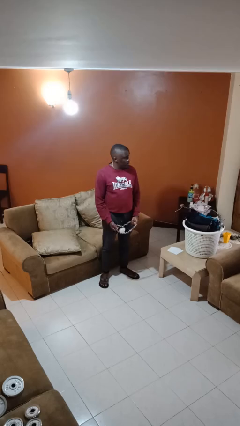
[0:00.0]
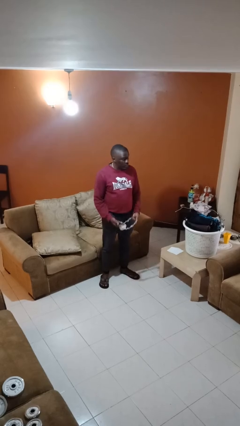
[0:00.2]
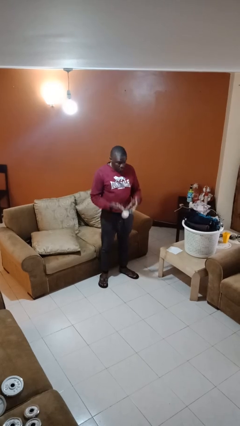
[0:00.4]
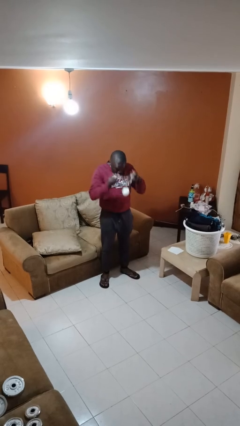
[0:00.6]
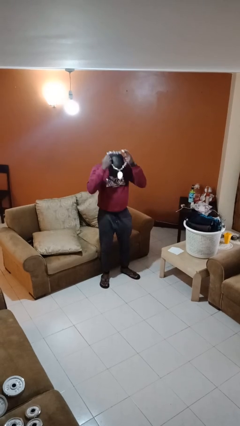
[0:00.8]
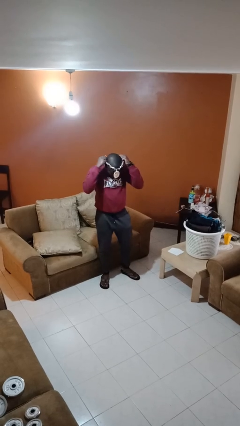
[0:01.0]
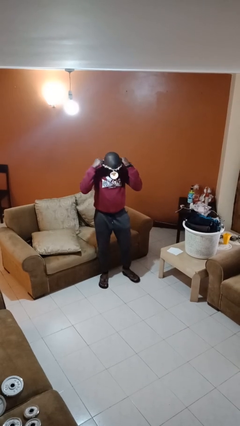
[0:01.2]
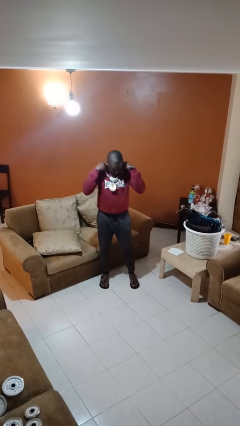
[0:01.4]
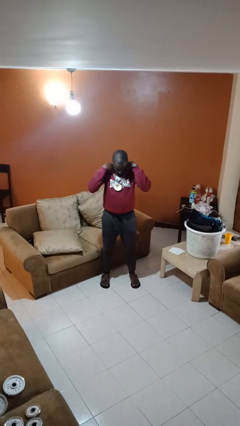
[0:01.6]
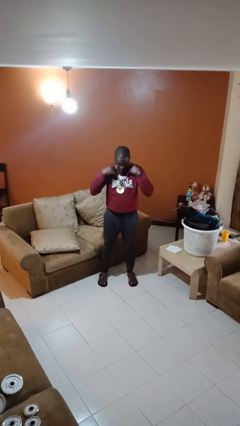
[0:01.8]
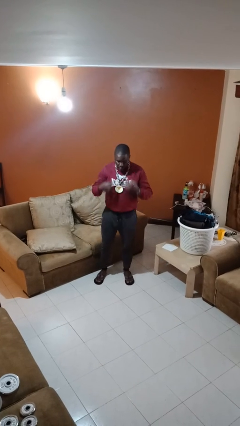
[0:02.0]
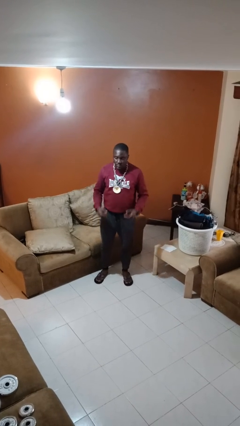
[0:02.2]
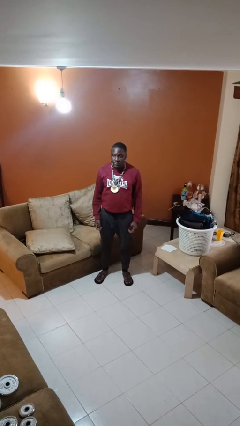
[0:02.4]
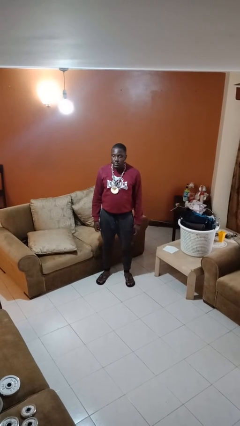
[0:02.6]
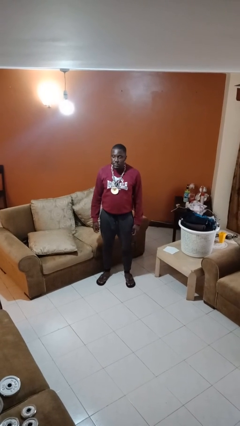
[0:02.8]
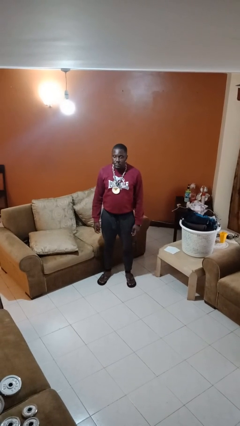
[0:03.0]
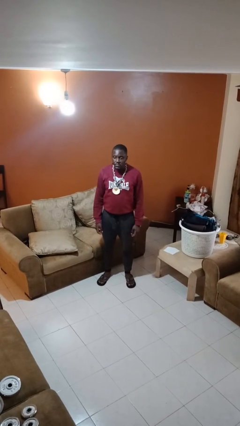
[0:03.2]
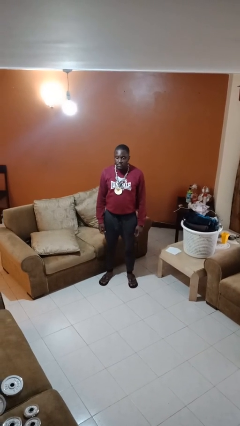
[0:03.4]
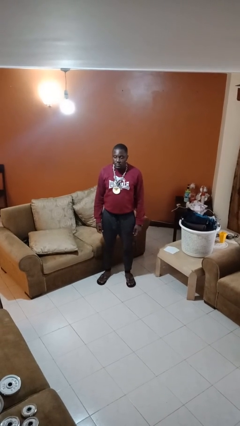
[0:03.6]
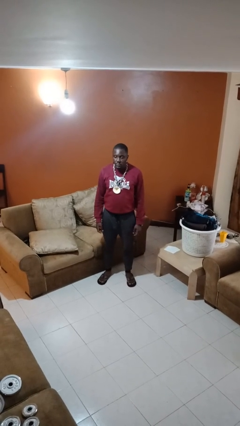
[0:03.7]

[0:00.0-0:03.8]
person puts on necklace

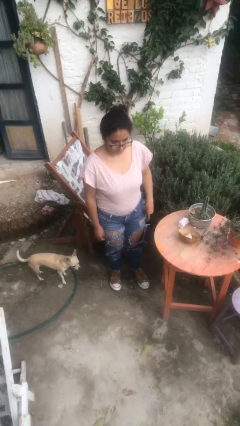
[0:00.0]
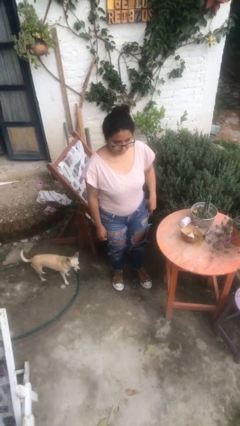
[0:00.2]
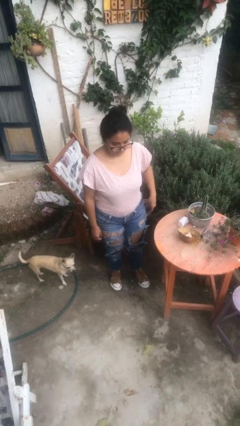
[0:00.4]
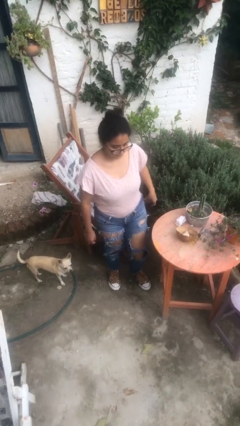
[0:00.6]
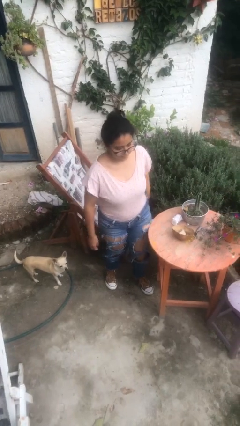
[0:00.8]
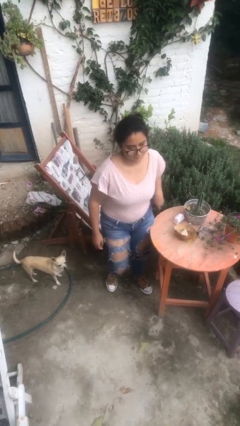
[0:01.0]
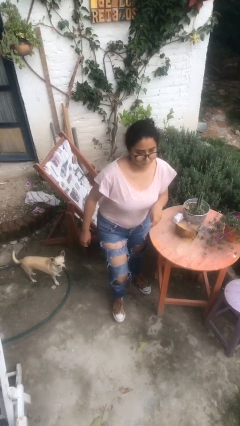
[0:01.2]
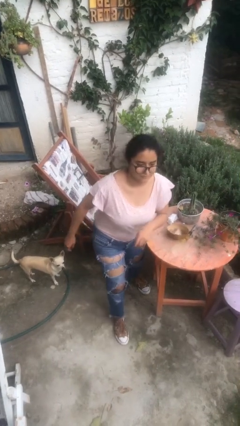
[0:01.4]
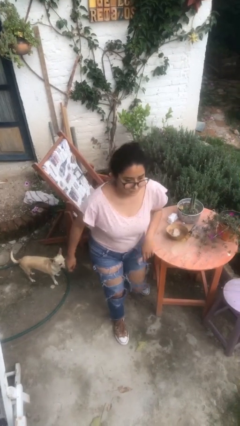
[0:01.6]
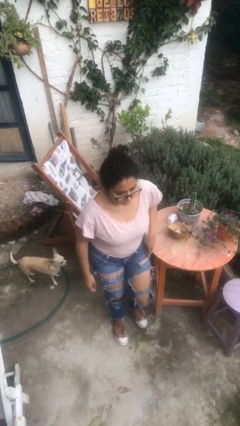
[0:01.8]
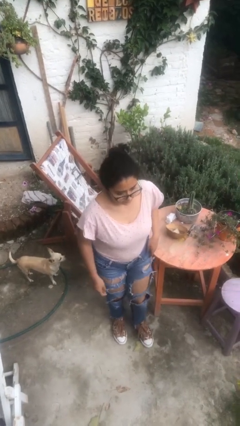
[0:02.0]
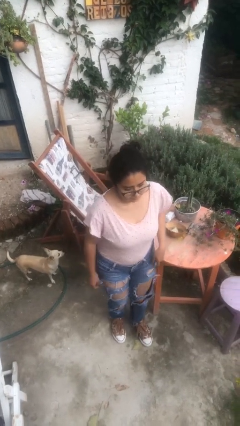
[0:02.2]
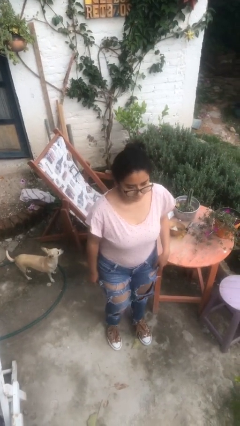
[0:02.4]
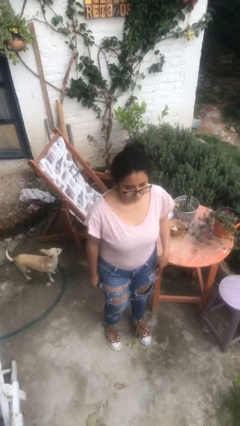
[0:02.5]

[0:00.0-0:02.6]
person bumps into table

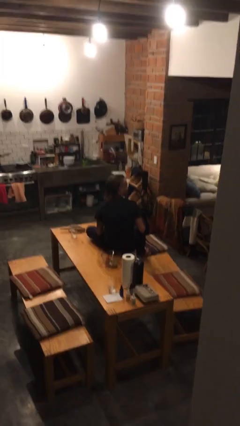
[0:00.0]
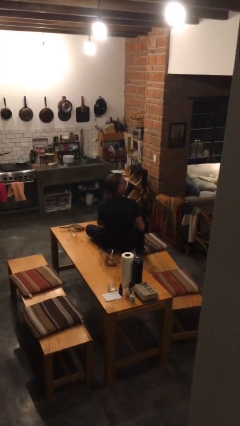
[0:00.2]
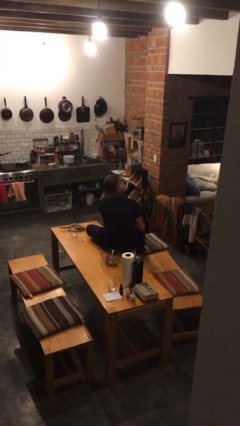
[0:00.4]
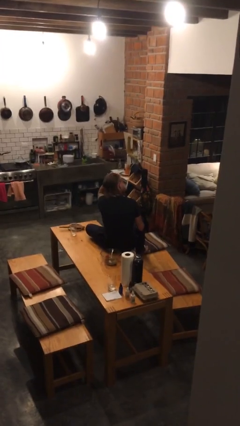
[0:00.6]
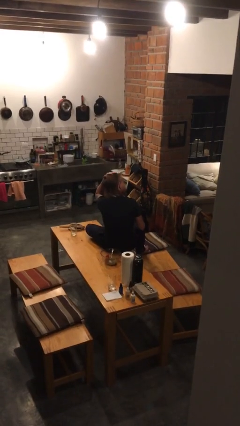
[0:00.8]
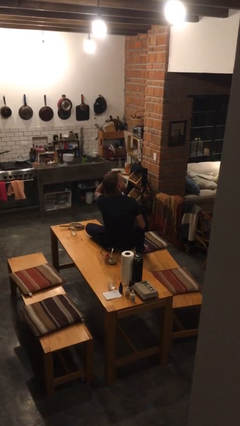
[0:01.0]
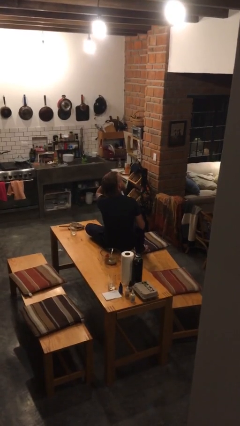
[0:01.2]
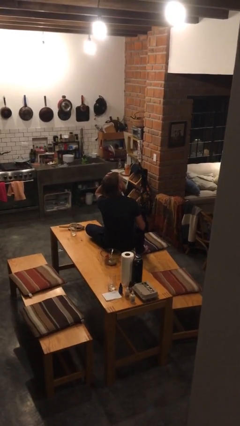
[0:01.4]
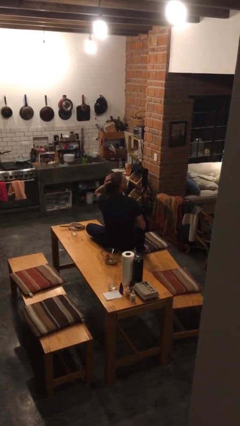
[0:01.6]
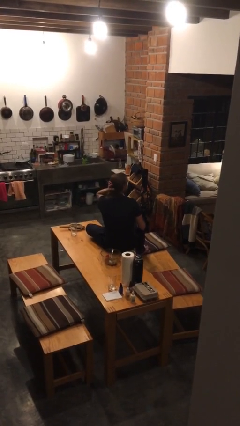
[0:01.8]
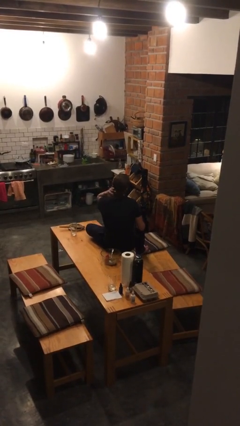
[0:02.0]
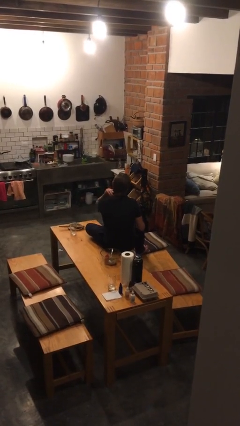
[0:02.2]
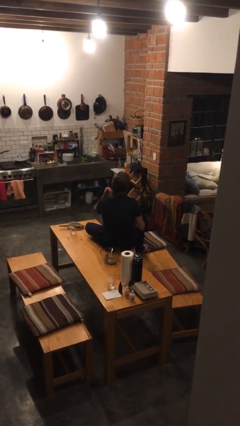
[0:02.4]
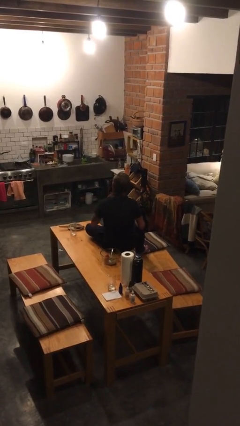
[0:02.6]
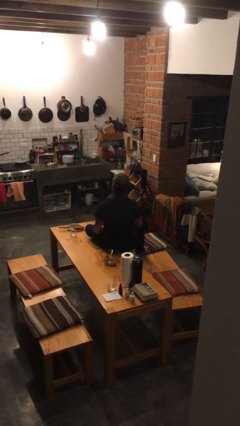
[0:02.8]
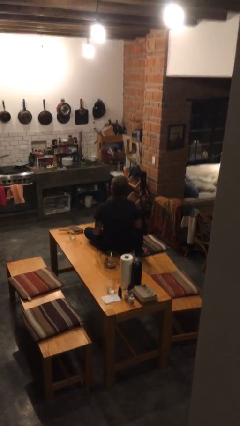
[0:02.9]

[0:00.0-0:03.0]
person strokes hair

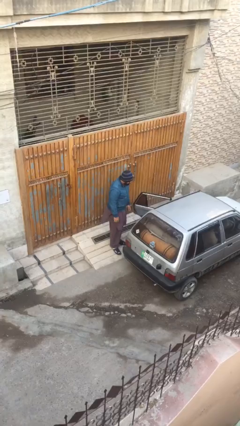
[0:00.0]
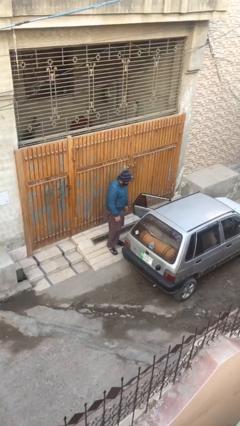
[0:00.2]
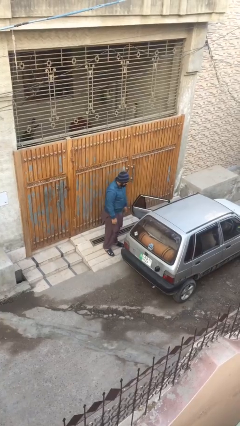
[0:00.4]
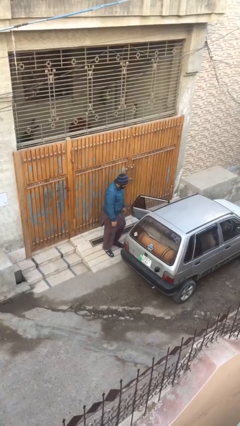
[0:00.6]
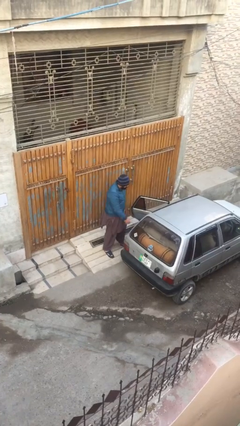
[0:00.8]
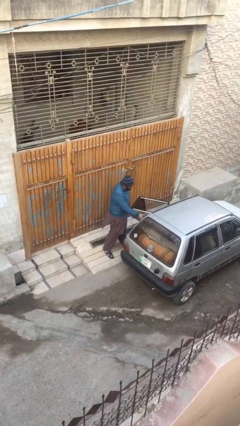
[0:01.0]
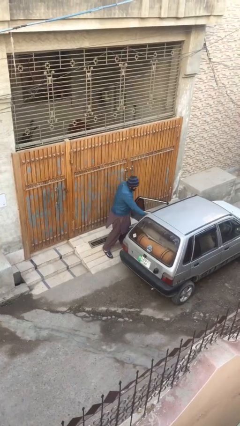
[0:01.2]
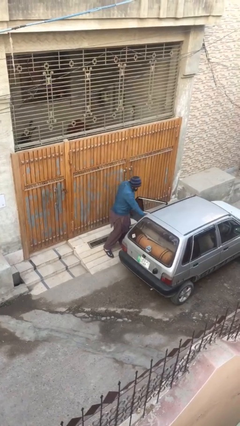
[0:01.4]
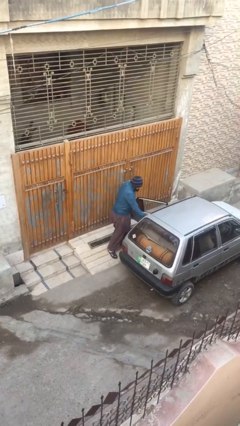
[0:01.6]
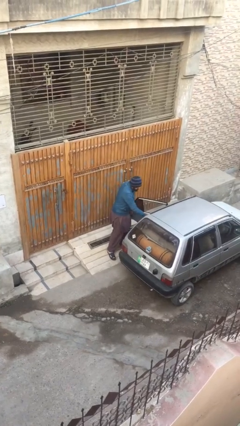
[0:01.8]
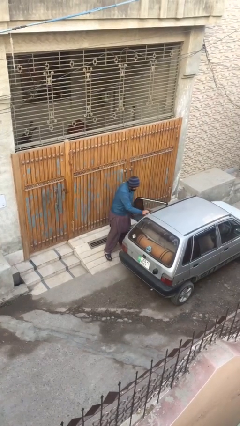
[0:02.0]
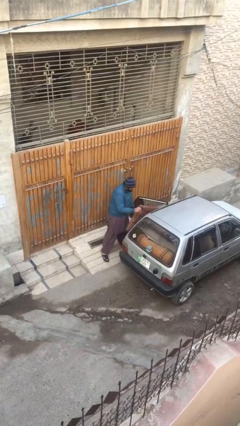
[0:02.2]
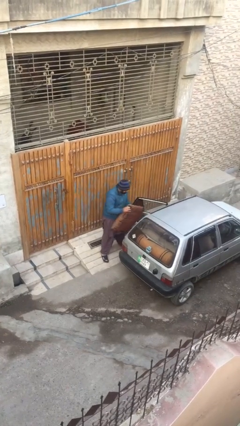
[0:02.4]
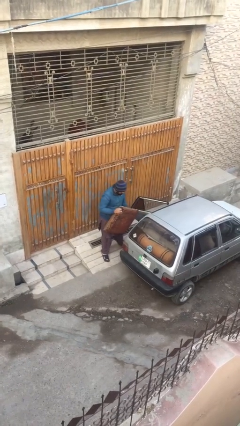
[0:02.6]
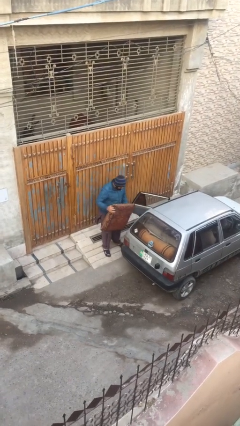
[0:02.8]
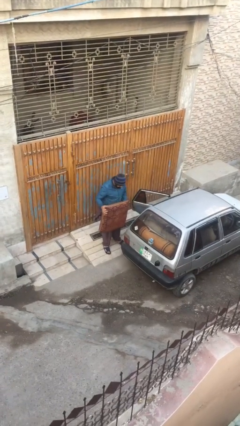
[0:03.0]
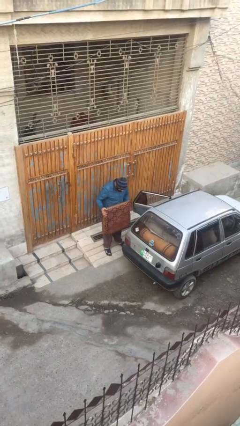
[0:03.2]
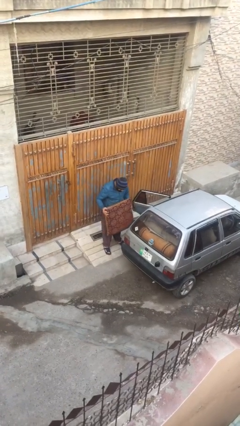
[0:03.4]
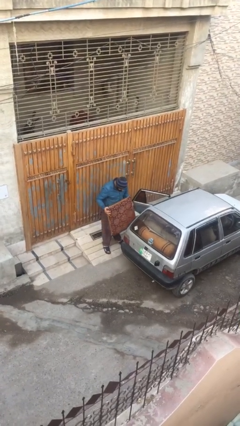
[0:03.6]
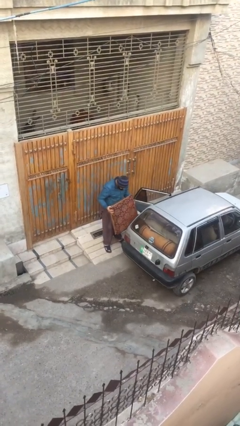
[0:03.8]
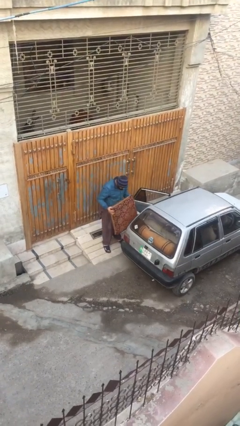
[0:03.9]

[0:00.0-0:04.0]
person unloads car

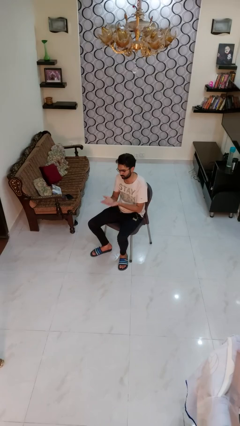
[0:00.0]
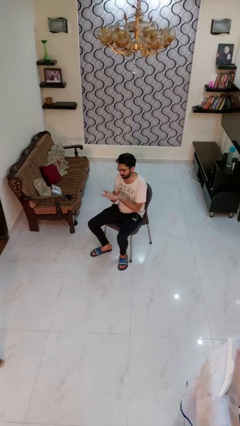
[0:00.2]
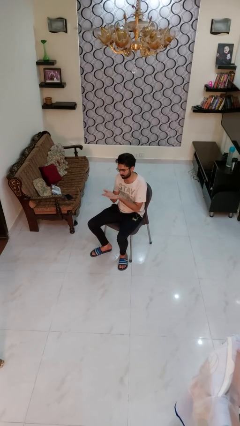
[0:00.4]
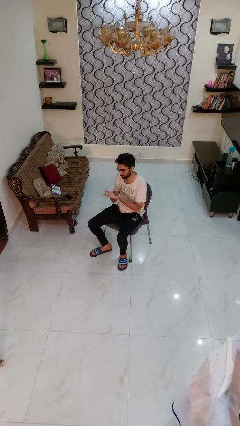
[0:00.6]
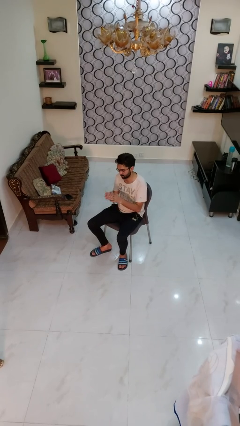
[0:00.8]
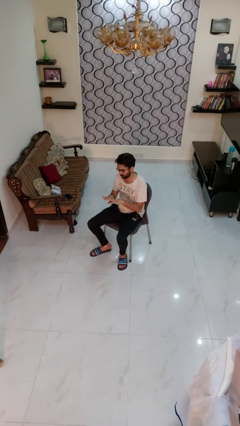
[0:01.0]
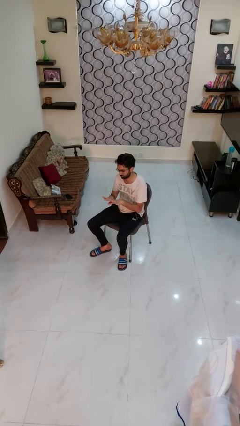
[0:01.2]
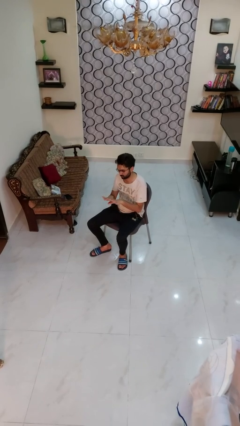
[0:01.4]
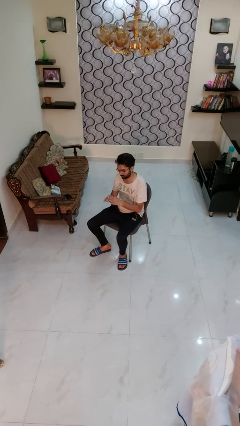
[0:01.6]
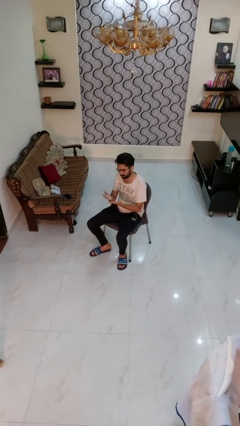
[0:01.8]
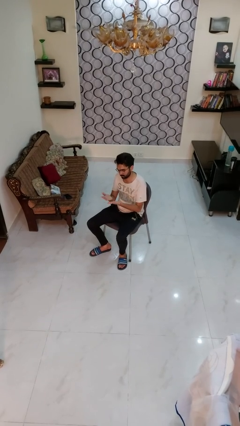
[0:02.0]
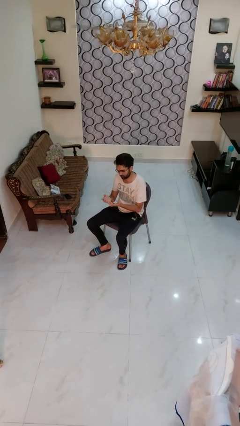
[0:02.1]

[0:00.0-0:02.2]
person looks at hands in lap

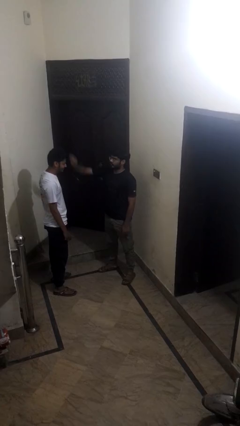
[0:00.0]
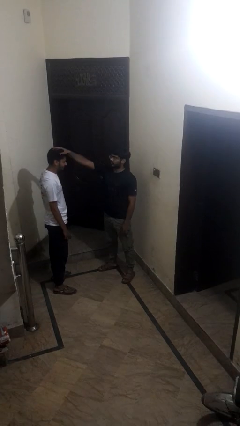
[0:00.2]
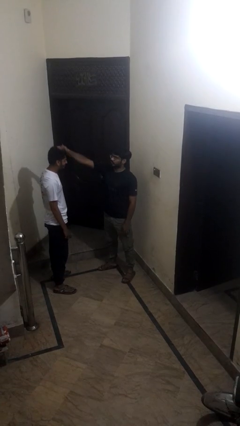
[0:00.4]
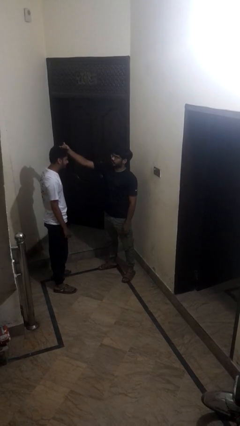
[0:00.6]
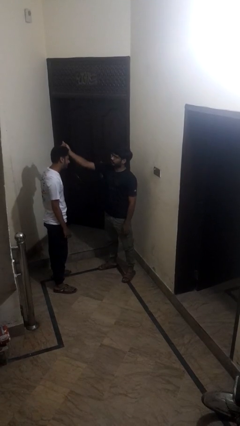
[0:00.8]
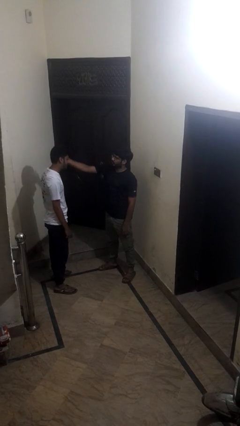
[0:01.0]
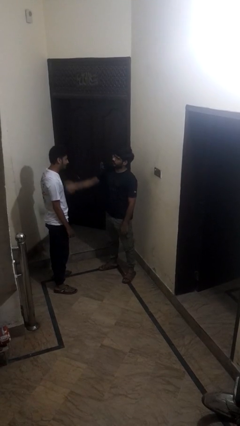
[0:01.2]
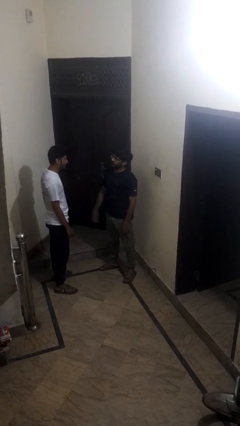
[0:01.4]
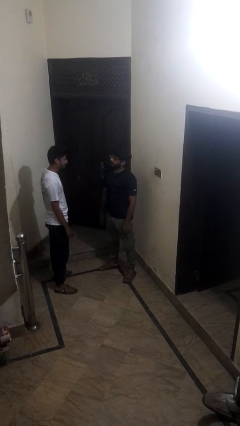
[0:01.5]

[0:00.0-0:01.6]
person grabs person by hair
